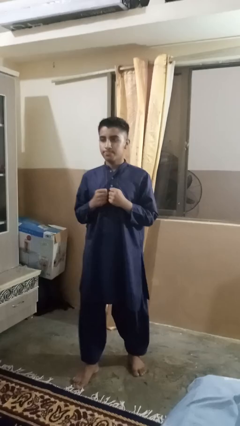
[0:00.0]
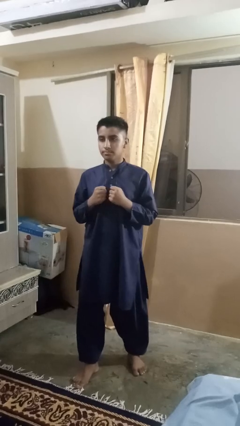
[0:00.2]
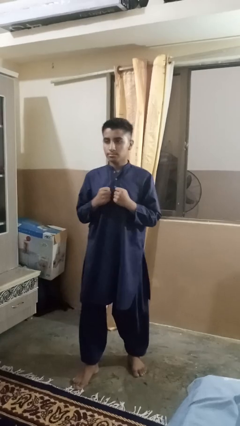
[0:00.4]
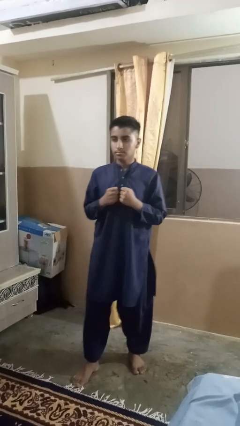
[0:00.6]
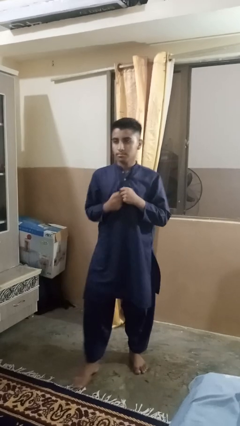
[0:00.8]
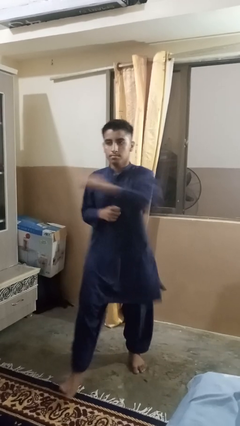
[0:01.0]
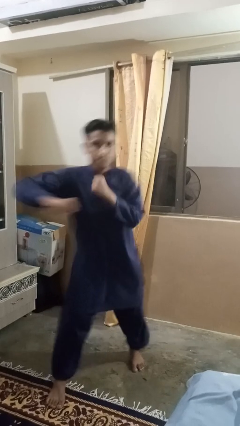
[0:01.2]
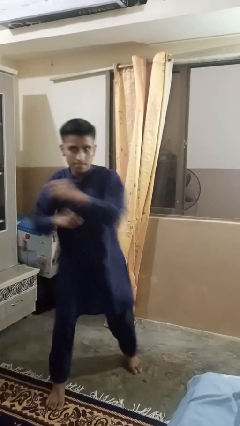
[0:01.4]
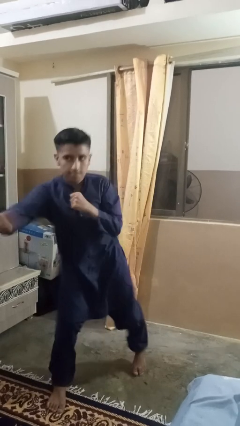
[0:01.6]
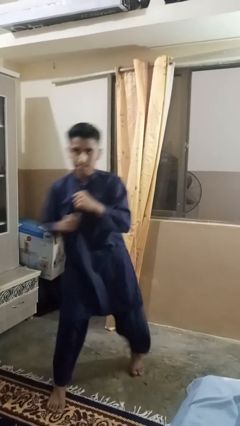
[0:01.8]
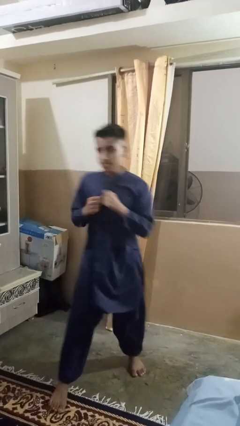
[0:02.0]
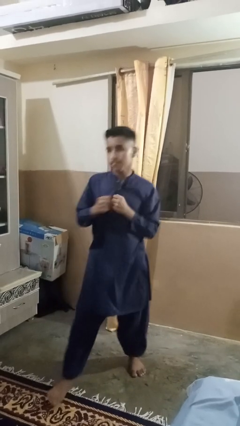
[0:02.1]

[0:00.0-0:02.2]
person punches

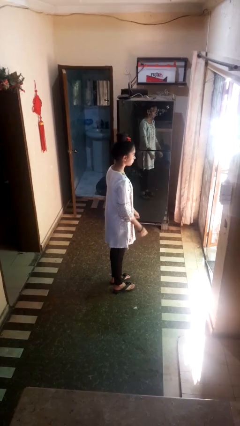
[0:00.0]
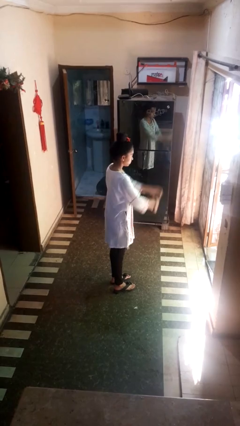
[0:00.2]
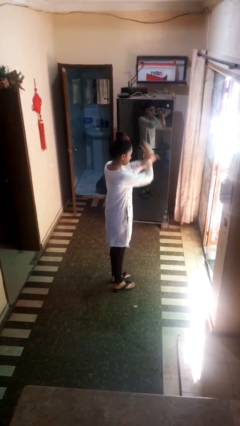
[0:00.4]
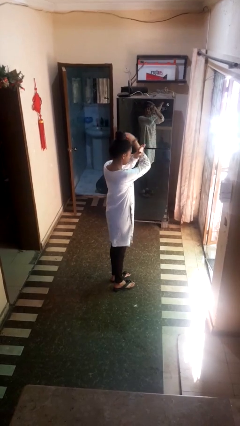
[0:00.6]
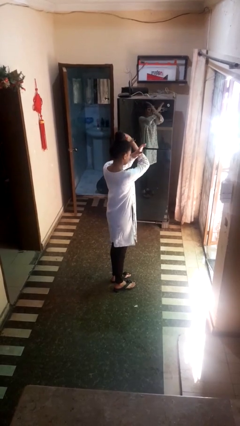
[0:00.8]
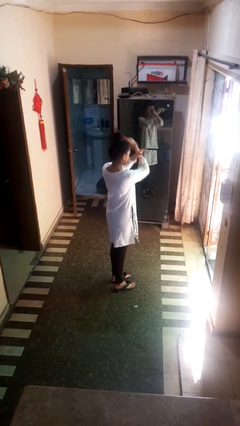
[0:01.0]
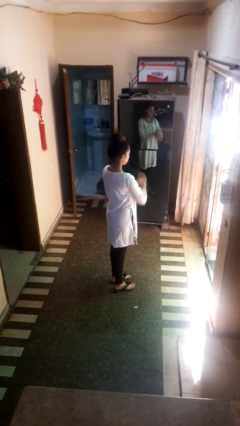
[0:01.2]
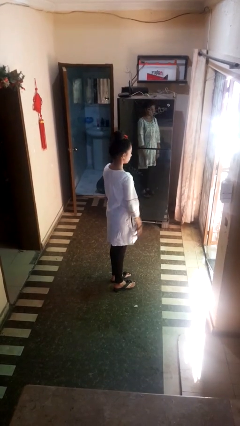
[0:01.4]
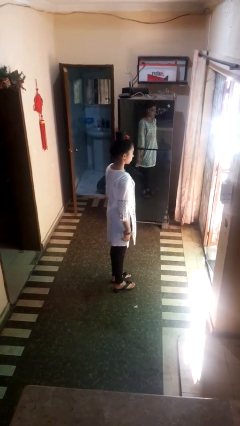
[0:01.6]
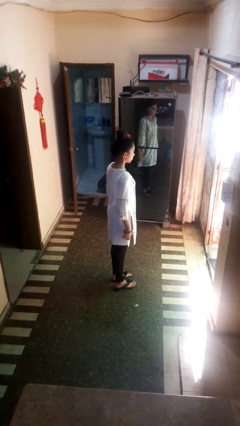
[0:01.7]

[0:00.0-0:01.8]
person gestures arms x

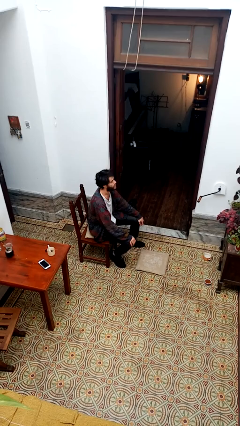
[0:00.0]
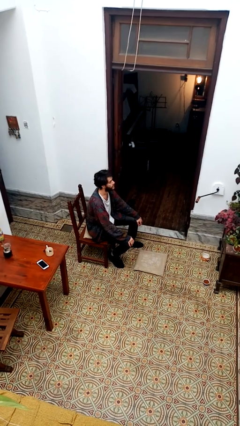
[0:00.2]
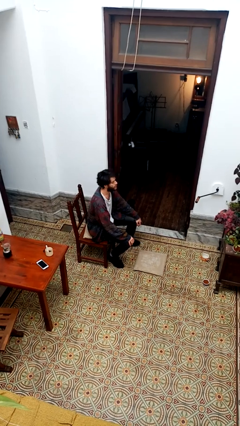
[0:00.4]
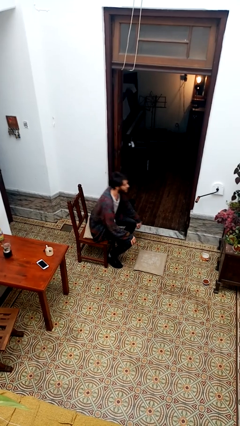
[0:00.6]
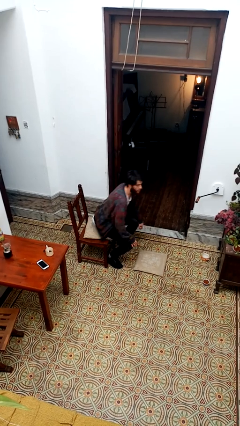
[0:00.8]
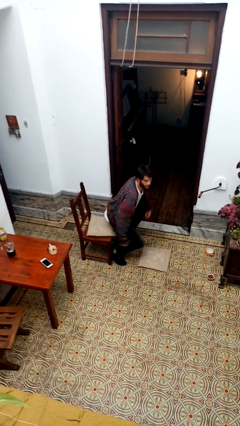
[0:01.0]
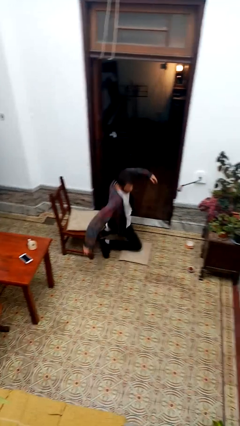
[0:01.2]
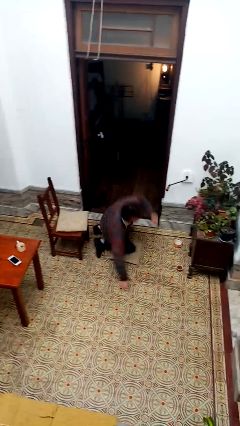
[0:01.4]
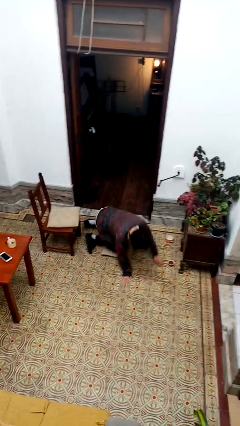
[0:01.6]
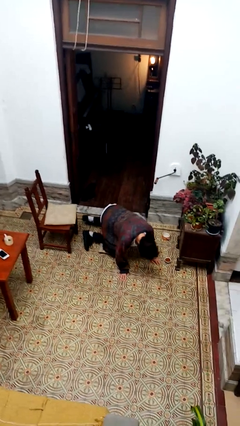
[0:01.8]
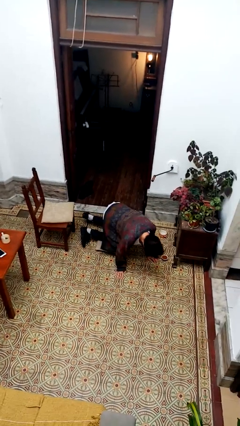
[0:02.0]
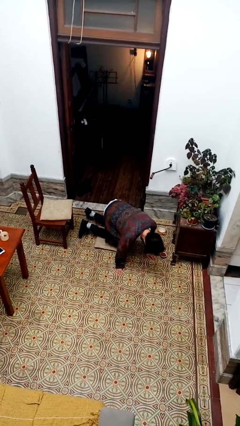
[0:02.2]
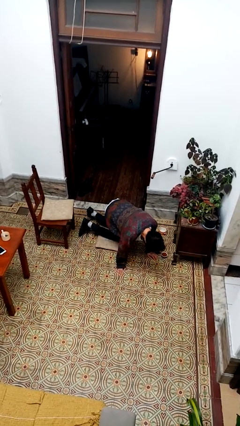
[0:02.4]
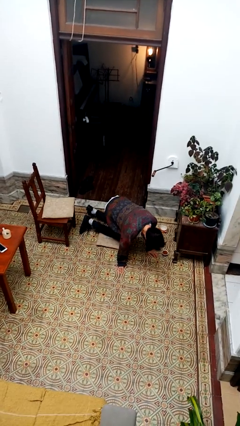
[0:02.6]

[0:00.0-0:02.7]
person falls from chair

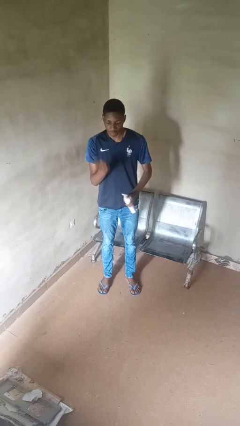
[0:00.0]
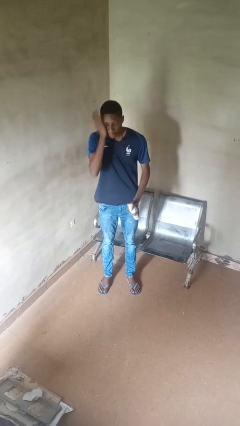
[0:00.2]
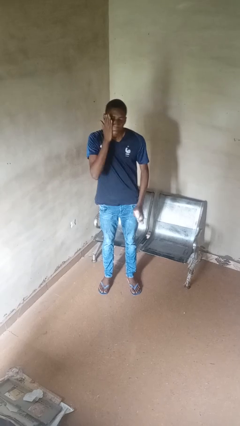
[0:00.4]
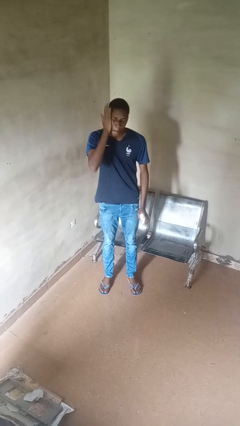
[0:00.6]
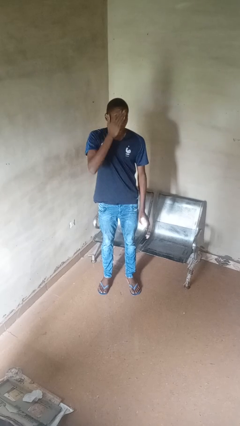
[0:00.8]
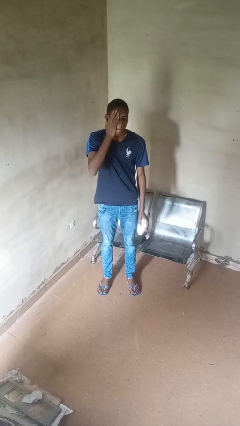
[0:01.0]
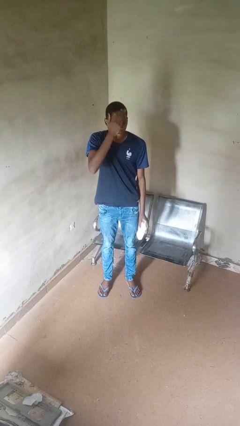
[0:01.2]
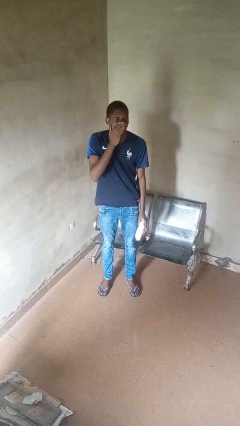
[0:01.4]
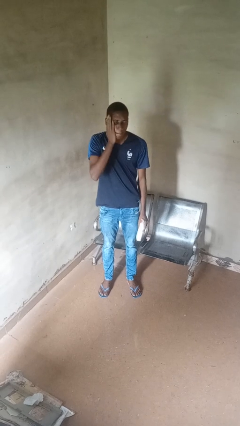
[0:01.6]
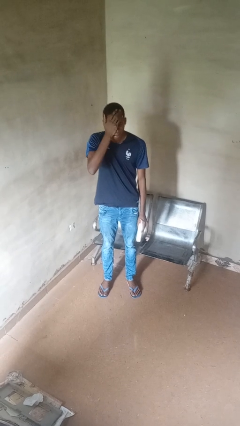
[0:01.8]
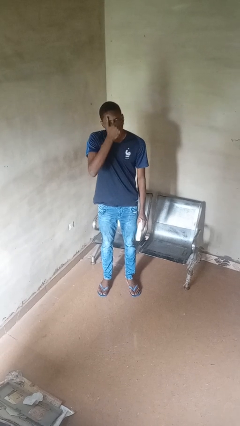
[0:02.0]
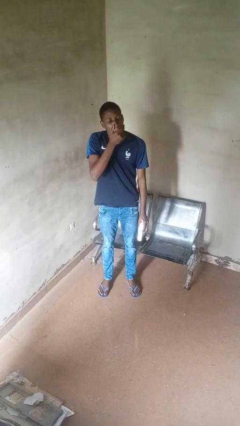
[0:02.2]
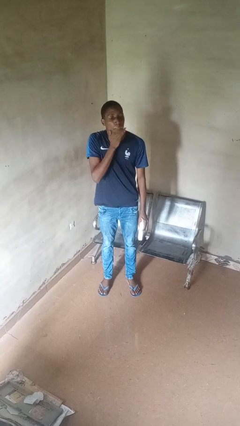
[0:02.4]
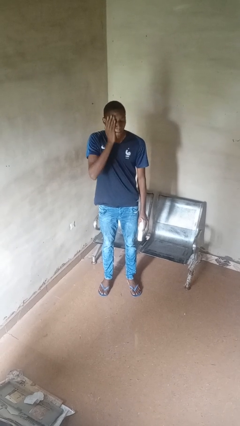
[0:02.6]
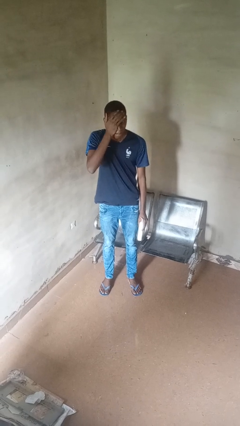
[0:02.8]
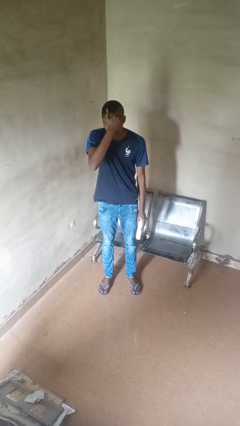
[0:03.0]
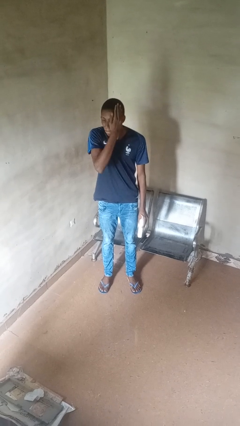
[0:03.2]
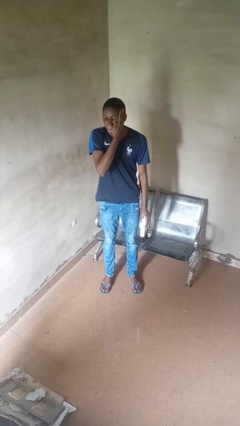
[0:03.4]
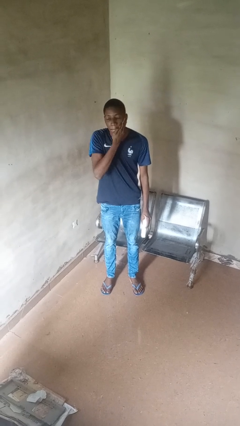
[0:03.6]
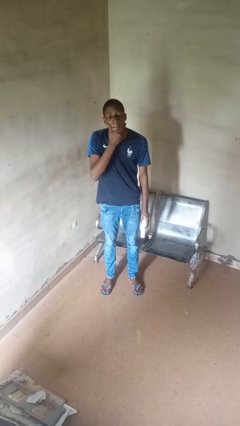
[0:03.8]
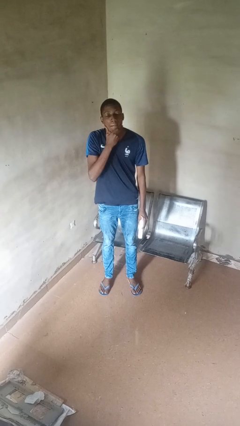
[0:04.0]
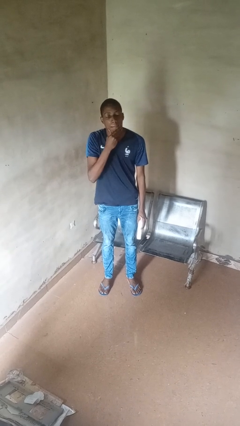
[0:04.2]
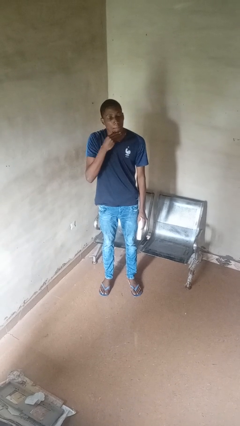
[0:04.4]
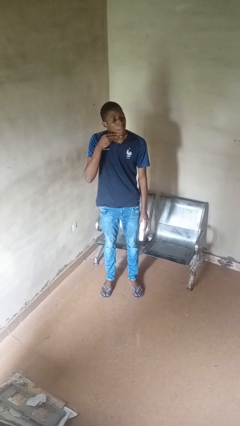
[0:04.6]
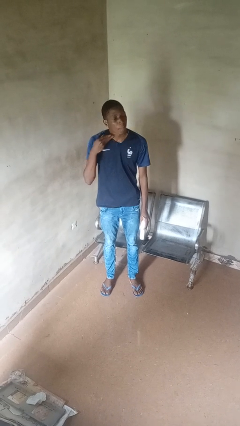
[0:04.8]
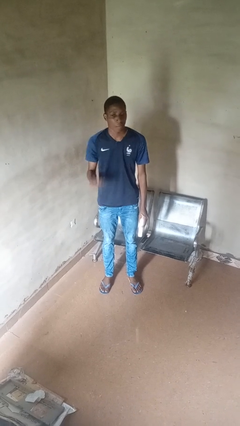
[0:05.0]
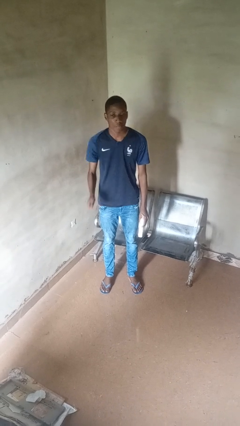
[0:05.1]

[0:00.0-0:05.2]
person applies facial moisturizer

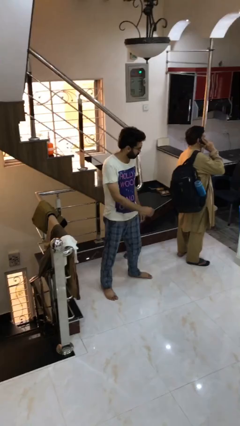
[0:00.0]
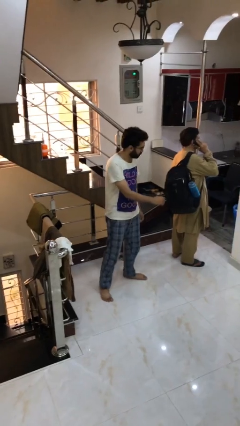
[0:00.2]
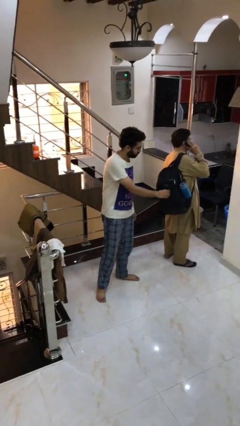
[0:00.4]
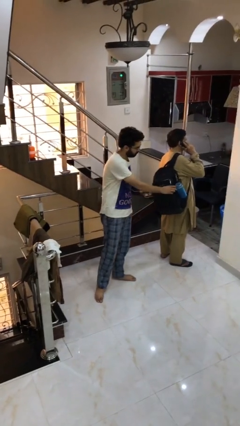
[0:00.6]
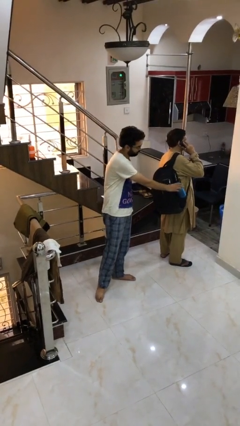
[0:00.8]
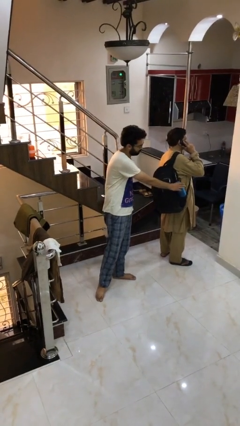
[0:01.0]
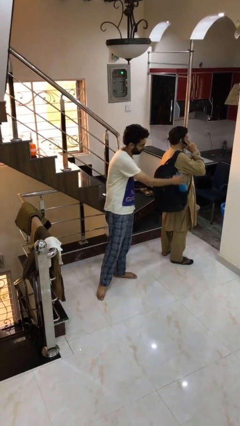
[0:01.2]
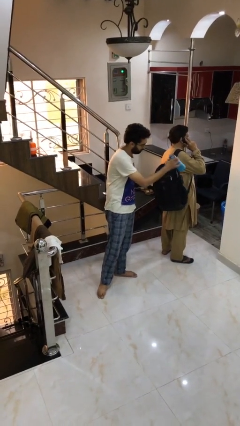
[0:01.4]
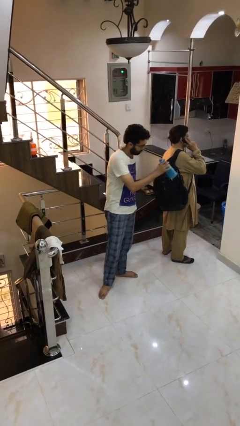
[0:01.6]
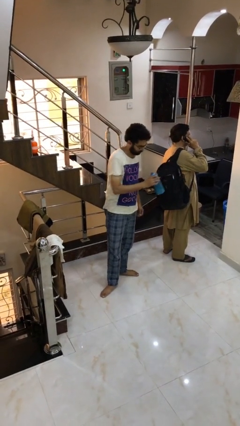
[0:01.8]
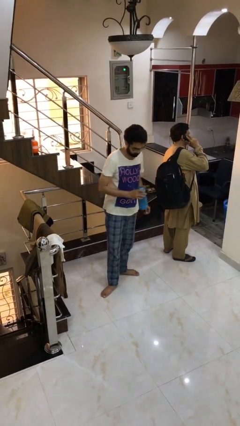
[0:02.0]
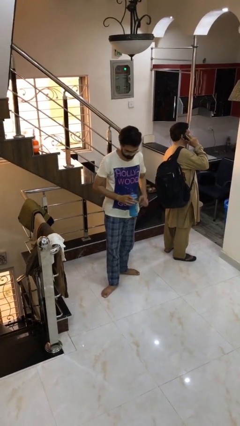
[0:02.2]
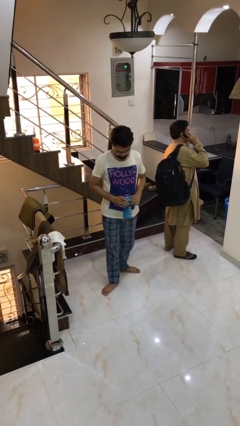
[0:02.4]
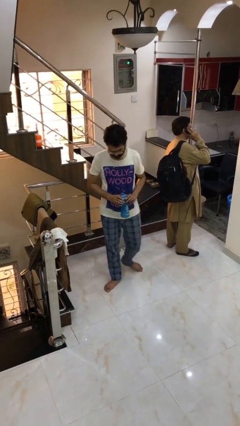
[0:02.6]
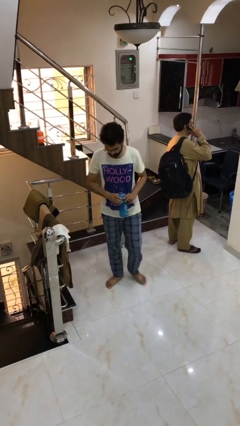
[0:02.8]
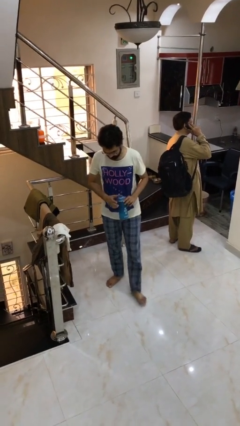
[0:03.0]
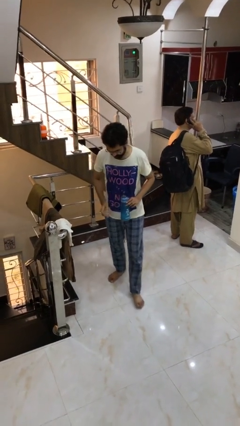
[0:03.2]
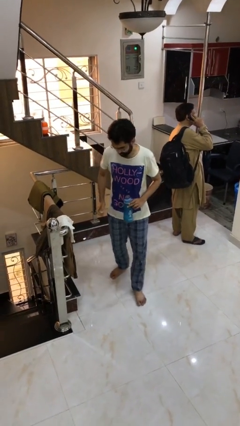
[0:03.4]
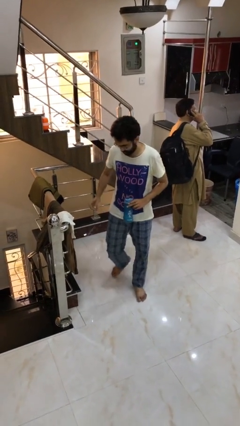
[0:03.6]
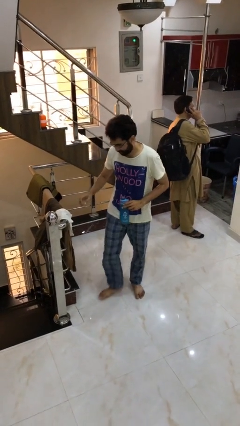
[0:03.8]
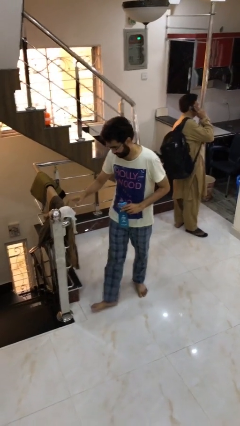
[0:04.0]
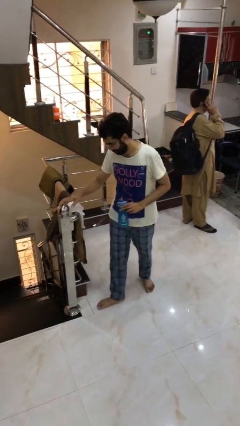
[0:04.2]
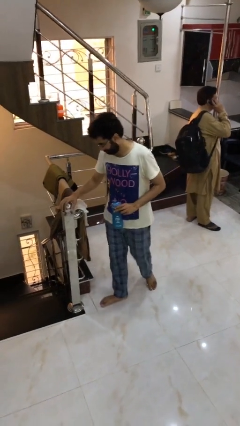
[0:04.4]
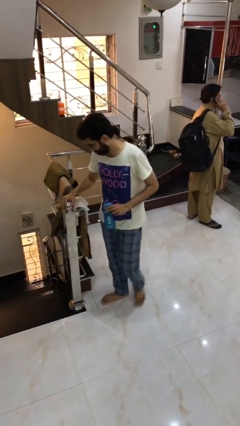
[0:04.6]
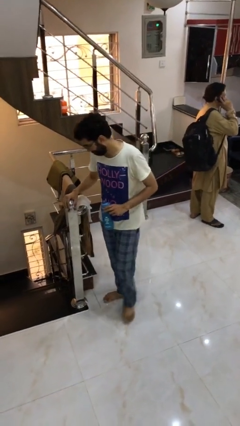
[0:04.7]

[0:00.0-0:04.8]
person steals object from person

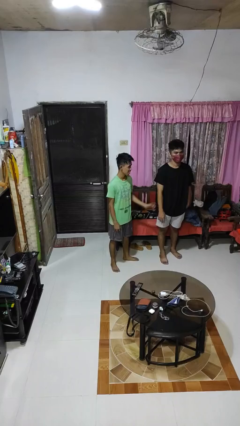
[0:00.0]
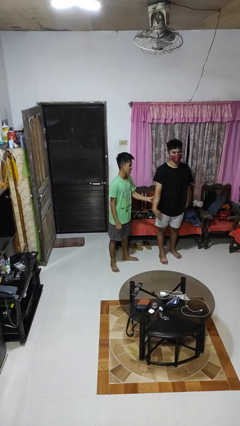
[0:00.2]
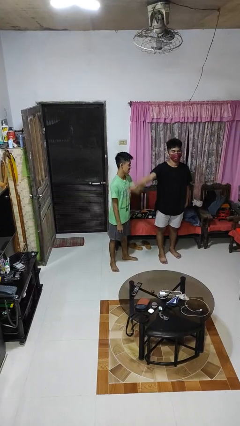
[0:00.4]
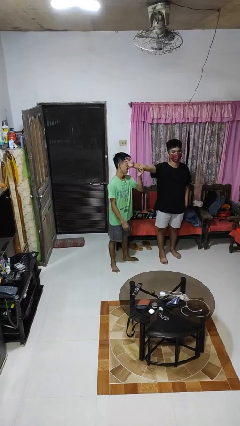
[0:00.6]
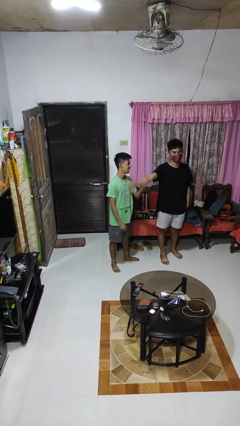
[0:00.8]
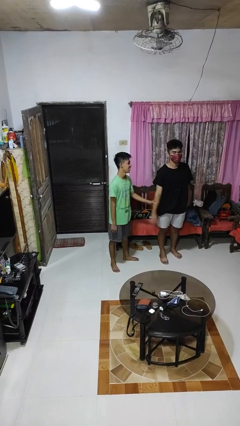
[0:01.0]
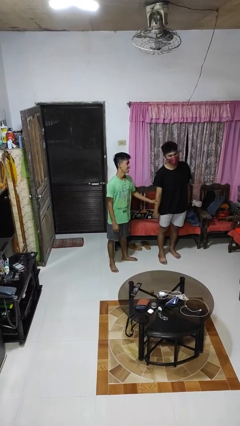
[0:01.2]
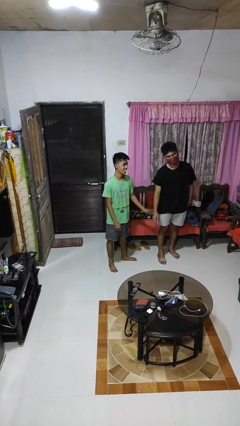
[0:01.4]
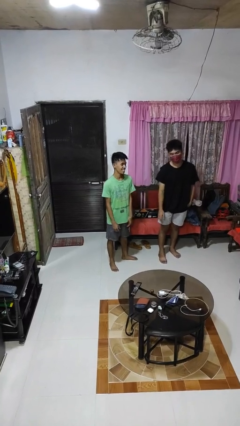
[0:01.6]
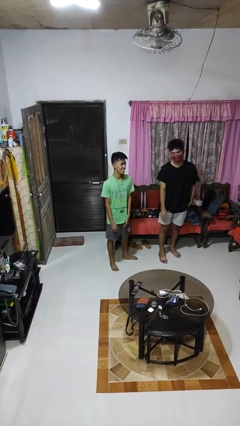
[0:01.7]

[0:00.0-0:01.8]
person grabs person by forearm
